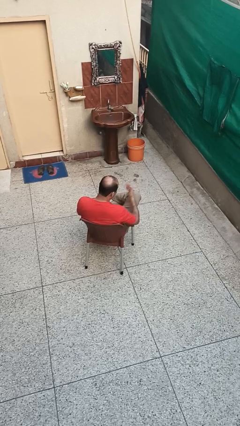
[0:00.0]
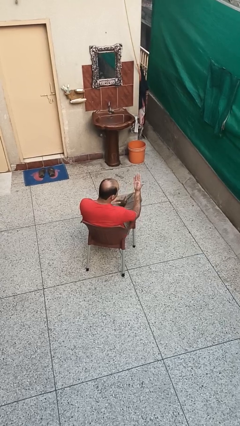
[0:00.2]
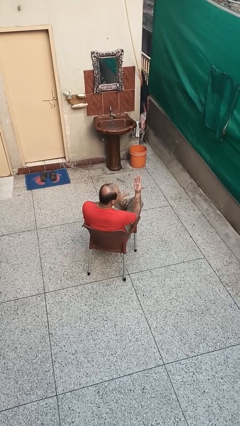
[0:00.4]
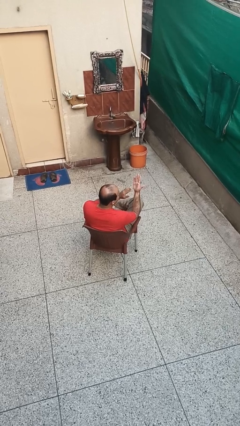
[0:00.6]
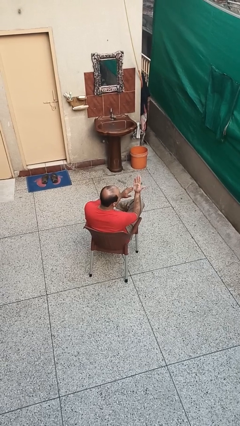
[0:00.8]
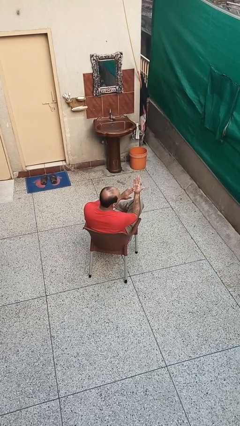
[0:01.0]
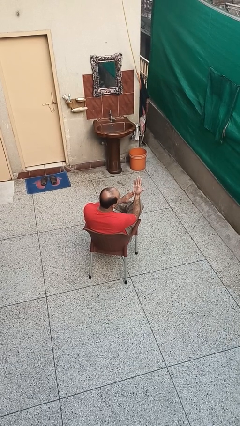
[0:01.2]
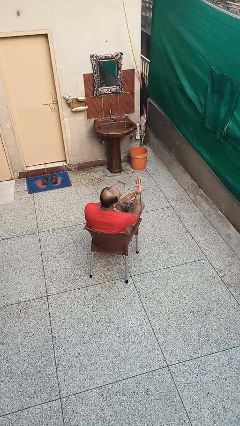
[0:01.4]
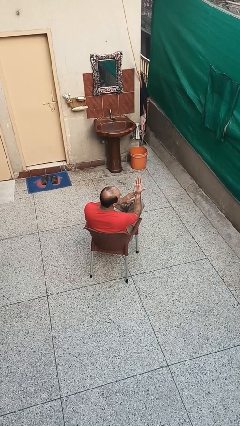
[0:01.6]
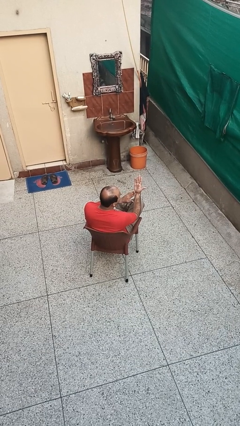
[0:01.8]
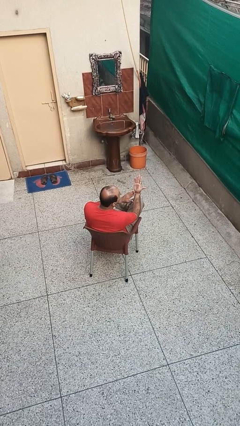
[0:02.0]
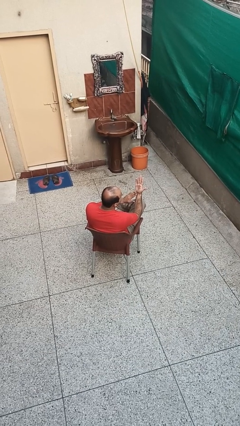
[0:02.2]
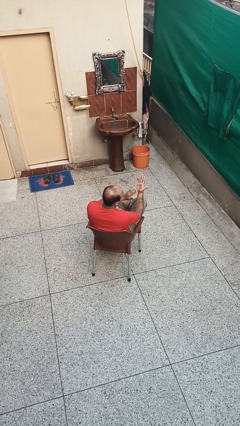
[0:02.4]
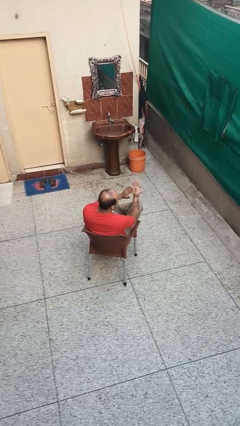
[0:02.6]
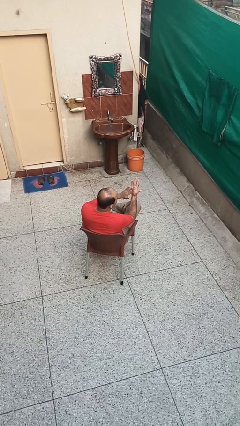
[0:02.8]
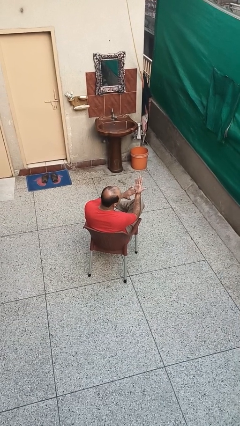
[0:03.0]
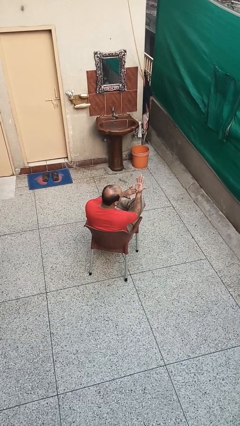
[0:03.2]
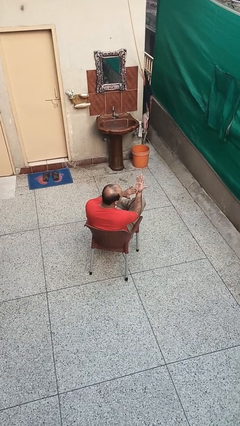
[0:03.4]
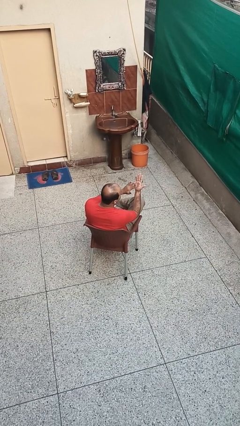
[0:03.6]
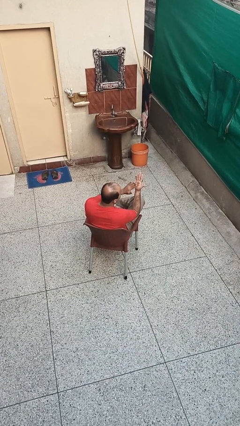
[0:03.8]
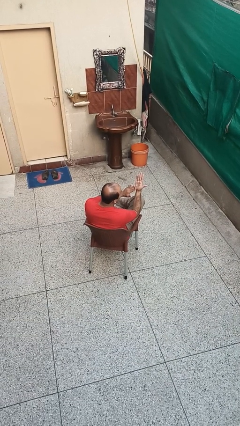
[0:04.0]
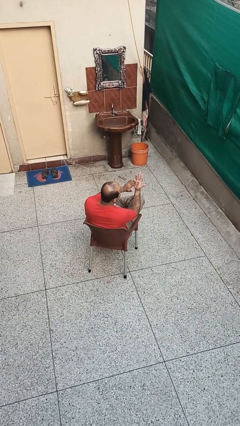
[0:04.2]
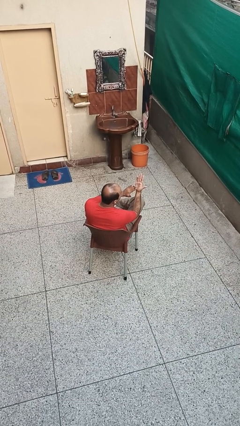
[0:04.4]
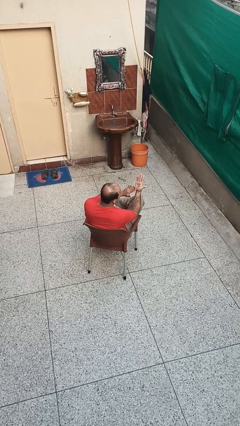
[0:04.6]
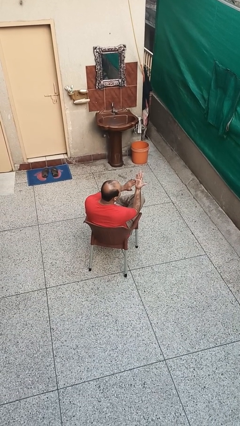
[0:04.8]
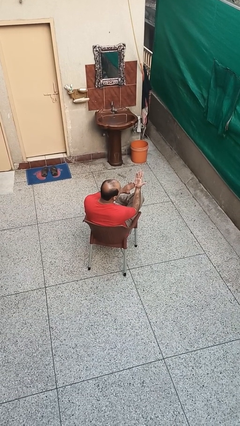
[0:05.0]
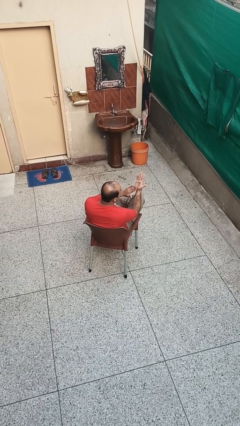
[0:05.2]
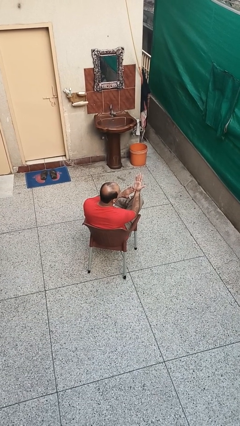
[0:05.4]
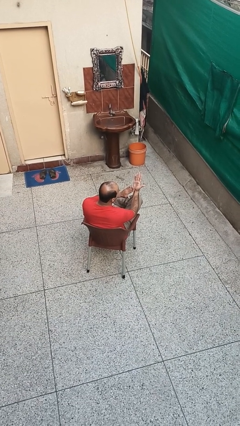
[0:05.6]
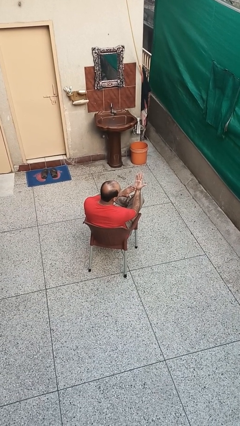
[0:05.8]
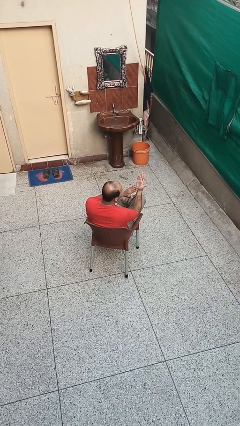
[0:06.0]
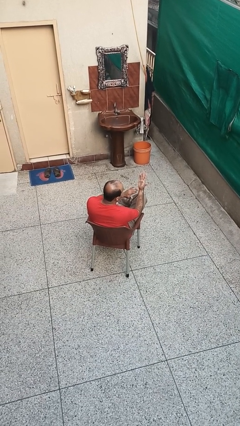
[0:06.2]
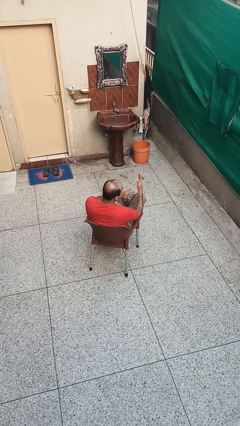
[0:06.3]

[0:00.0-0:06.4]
person looks at hands in lap

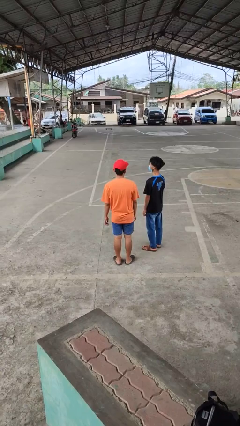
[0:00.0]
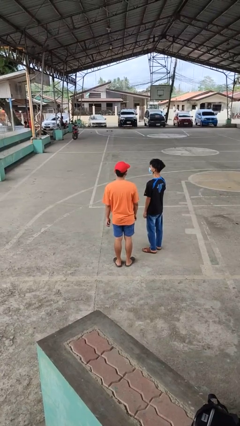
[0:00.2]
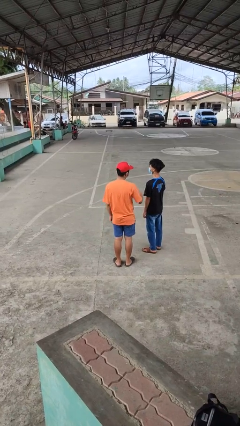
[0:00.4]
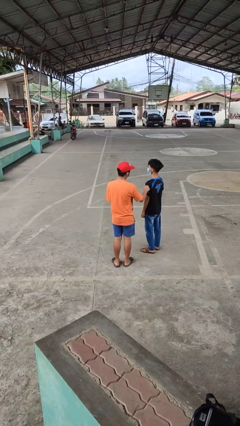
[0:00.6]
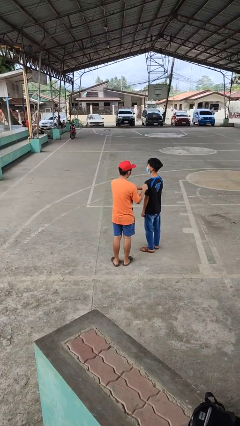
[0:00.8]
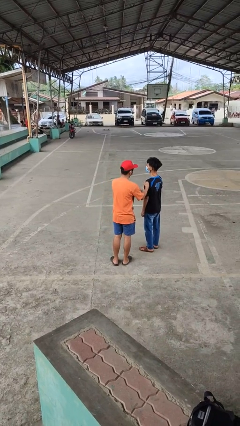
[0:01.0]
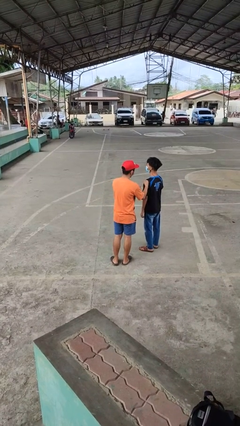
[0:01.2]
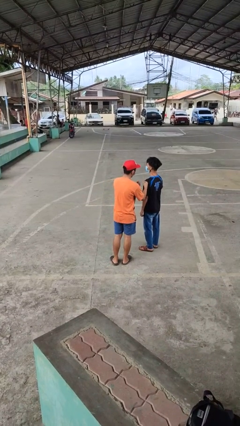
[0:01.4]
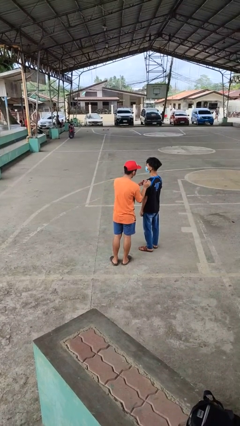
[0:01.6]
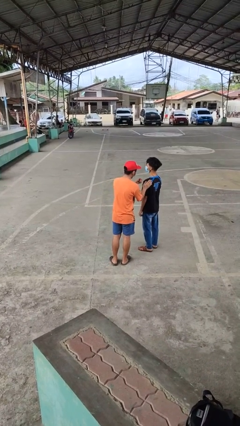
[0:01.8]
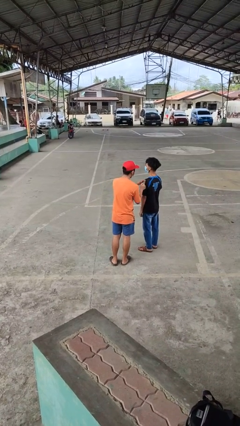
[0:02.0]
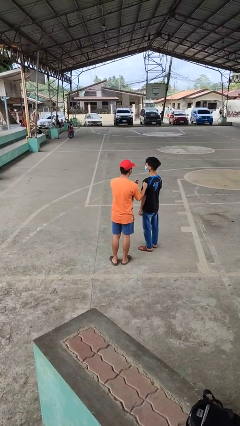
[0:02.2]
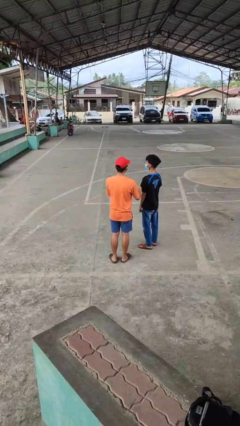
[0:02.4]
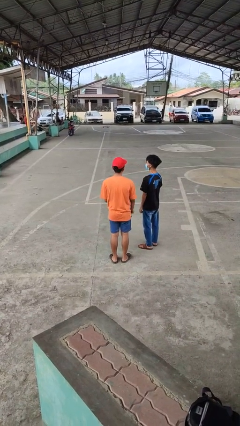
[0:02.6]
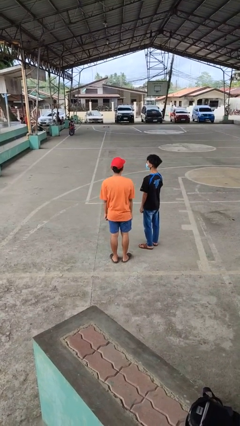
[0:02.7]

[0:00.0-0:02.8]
person pounds shoulders of person

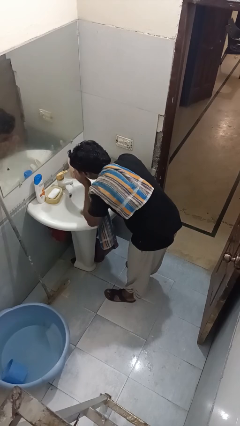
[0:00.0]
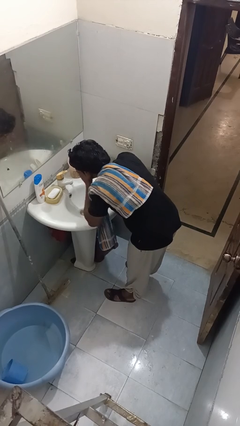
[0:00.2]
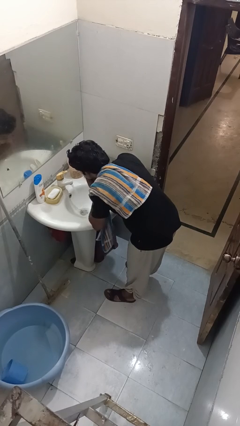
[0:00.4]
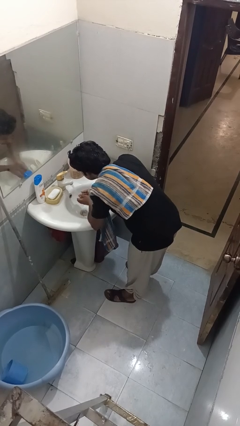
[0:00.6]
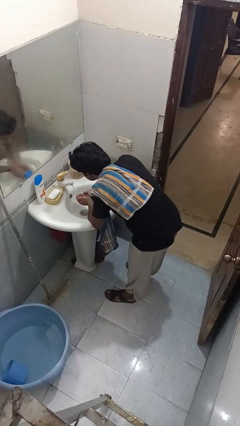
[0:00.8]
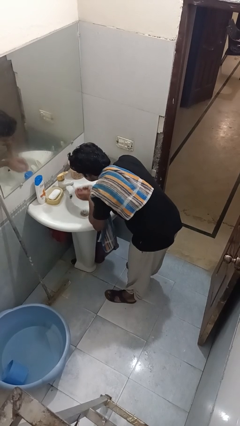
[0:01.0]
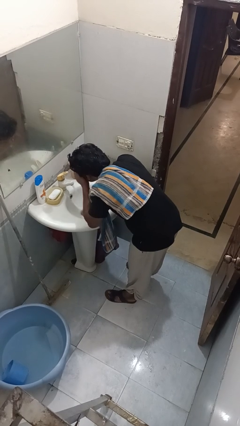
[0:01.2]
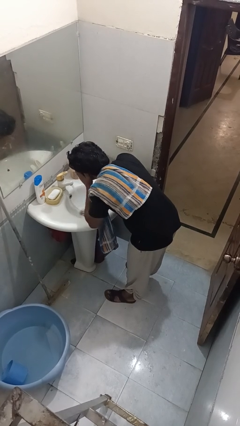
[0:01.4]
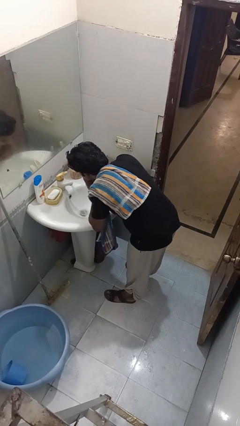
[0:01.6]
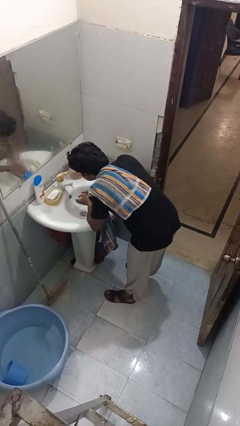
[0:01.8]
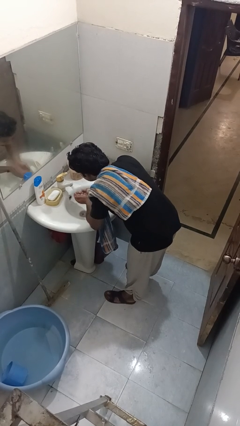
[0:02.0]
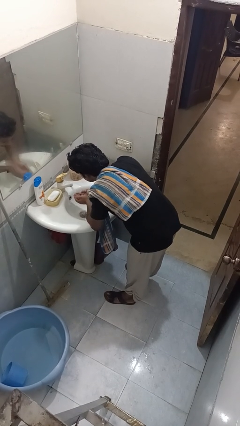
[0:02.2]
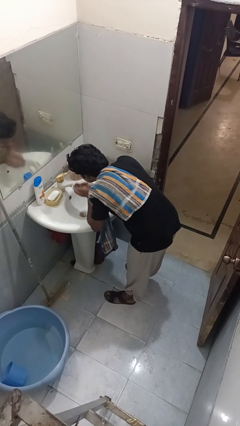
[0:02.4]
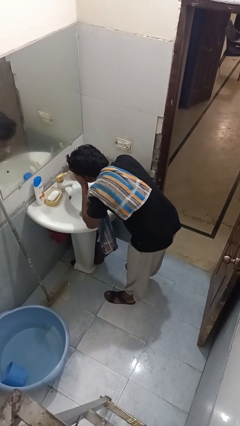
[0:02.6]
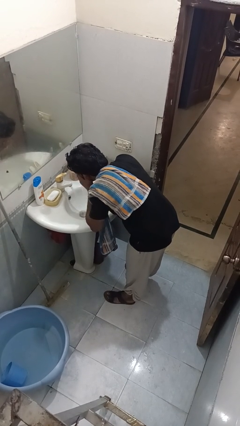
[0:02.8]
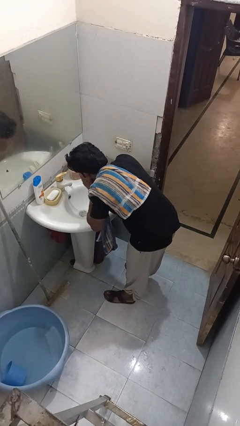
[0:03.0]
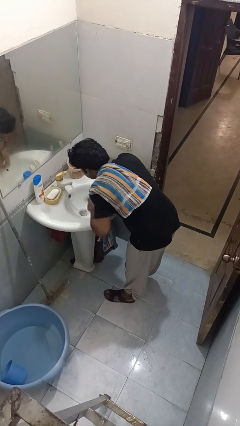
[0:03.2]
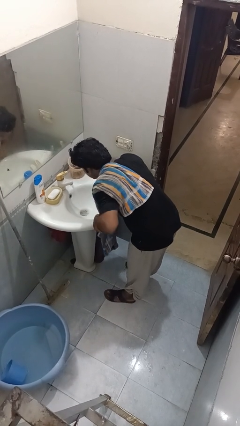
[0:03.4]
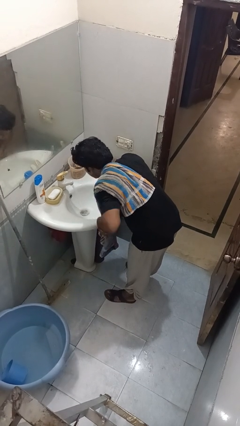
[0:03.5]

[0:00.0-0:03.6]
person washes face

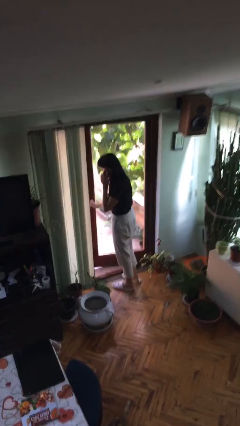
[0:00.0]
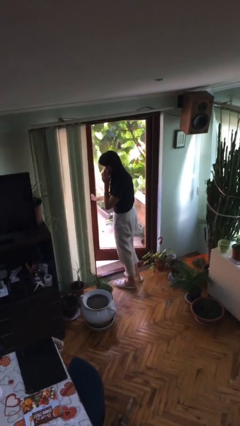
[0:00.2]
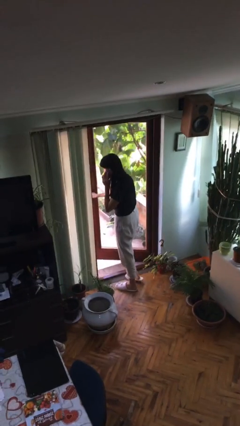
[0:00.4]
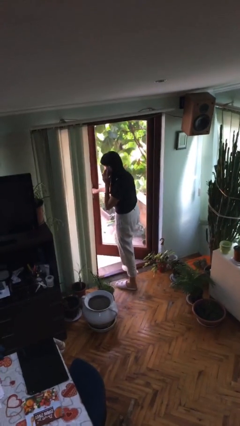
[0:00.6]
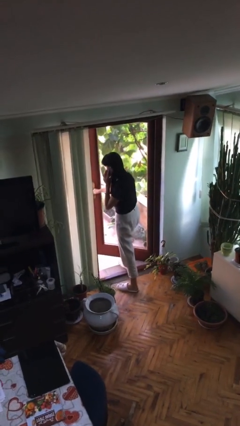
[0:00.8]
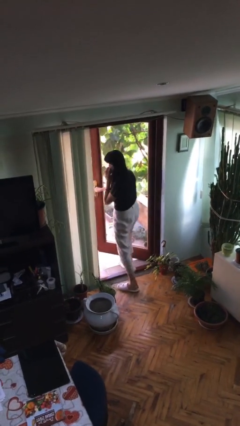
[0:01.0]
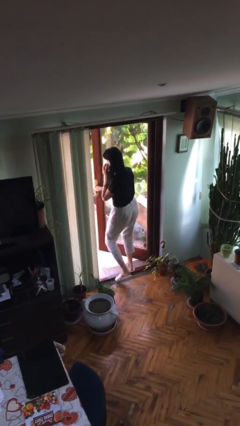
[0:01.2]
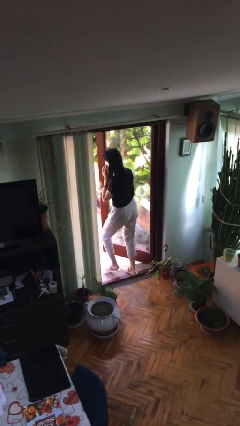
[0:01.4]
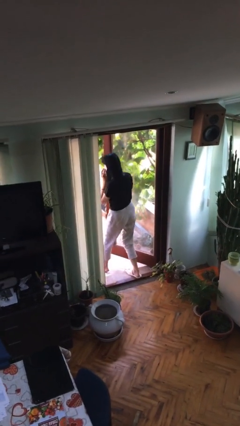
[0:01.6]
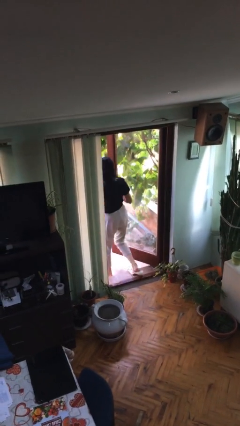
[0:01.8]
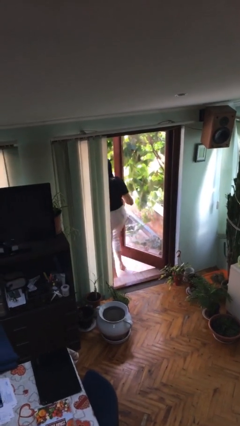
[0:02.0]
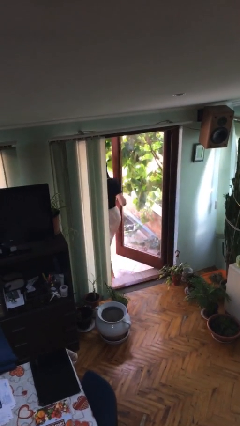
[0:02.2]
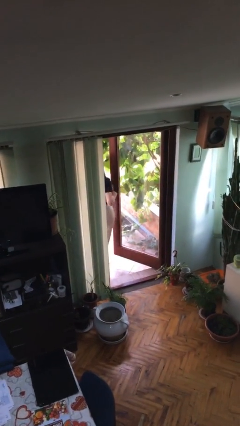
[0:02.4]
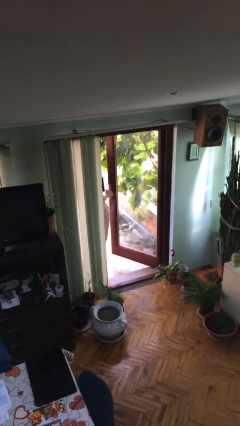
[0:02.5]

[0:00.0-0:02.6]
person exits scene through structure

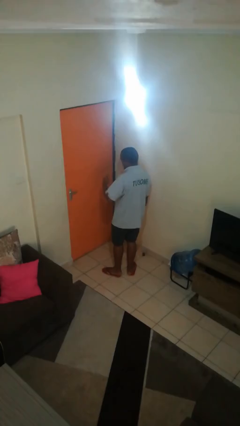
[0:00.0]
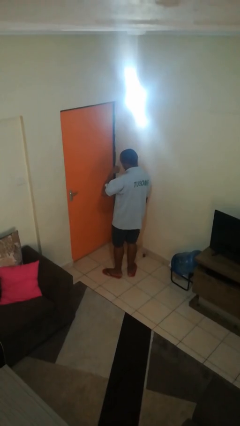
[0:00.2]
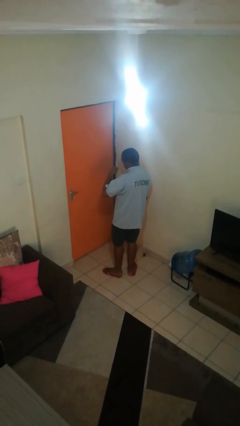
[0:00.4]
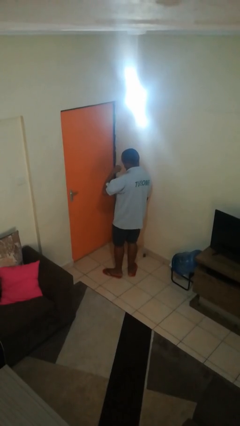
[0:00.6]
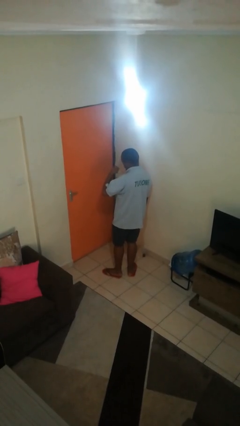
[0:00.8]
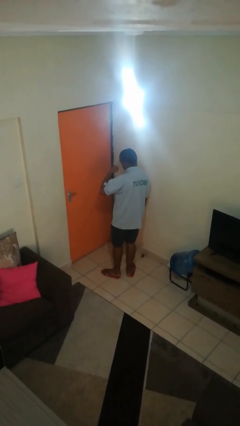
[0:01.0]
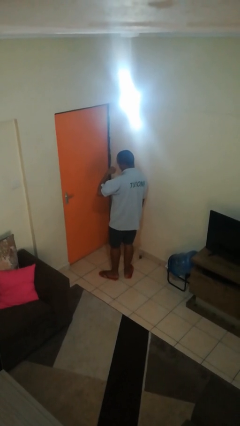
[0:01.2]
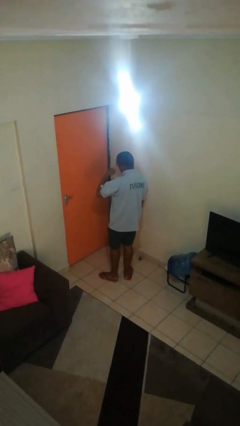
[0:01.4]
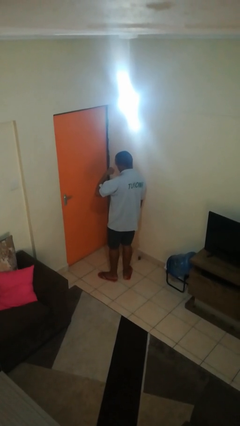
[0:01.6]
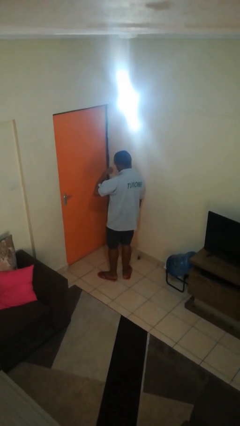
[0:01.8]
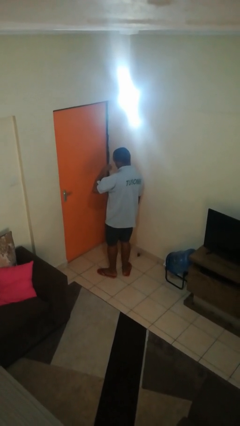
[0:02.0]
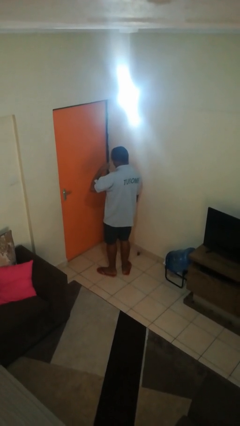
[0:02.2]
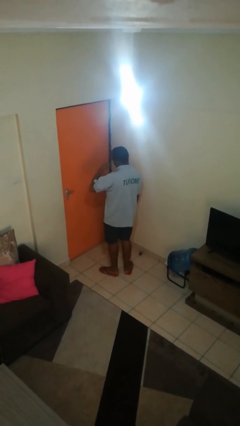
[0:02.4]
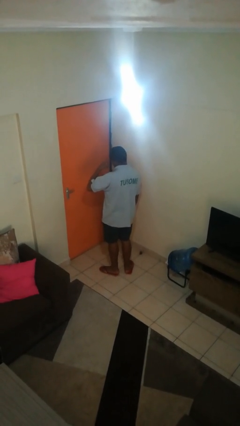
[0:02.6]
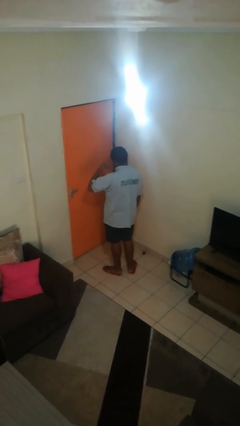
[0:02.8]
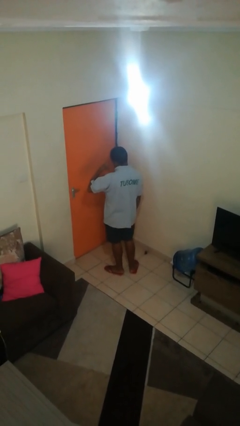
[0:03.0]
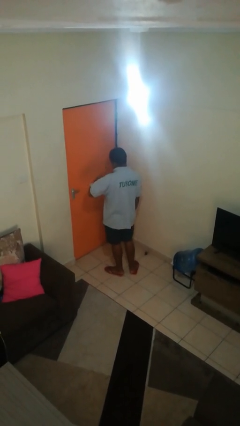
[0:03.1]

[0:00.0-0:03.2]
person gestures call me
